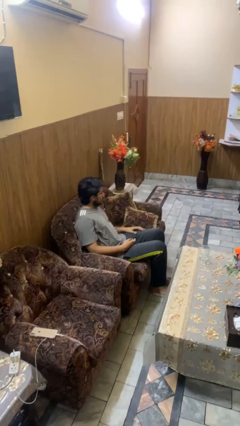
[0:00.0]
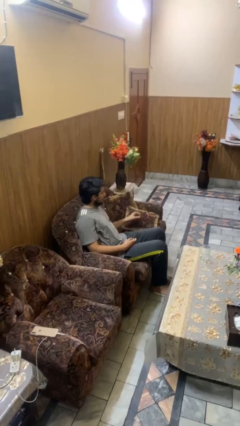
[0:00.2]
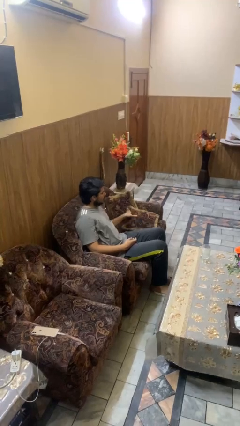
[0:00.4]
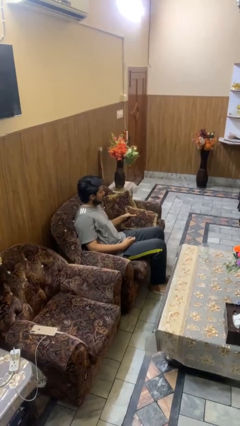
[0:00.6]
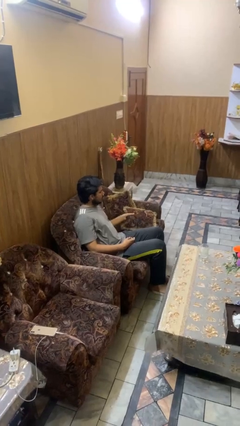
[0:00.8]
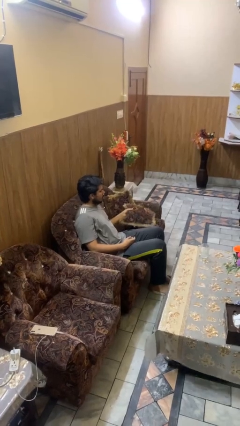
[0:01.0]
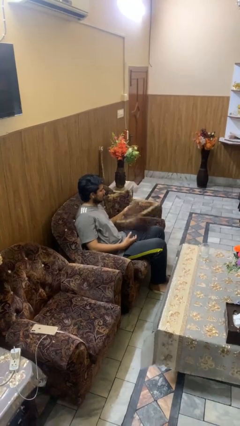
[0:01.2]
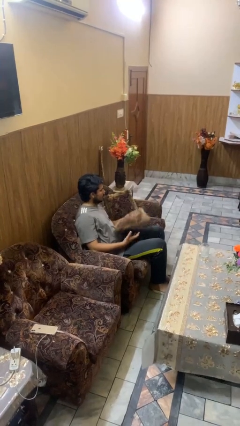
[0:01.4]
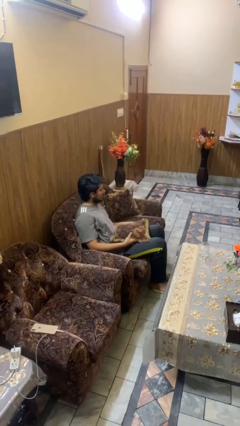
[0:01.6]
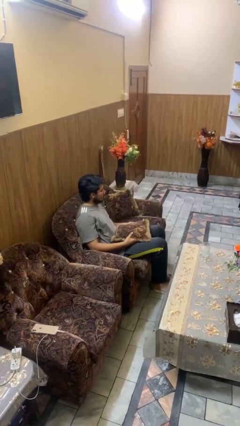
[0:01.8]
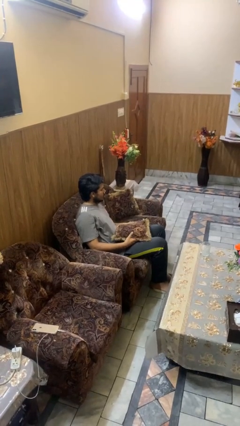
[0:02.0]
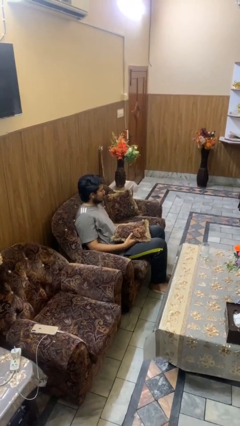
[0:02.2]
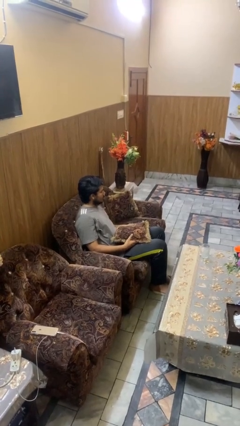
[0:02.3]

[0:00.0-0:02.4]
person picks up object from couch

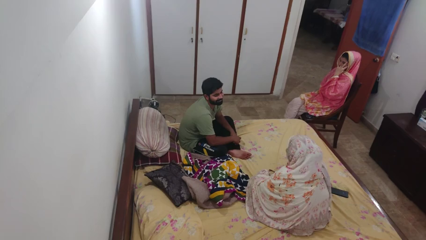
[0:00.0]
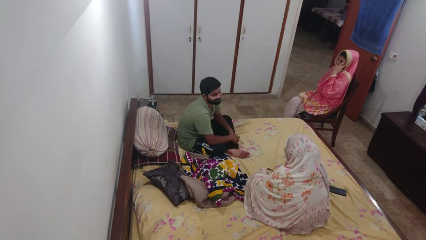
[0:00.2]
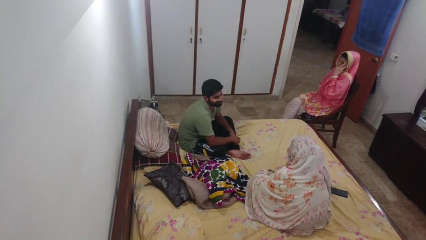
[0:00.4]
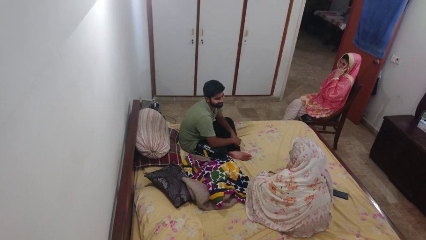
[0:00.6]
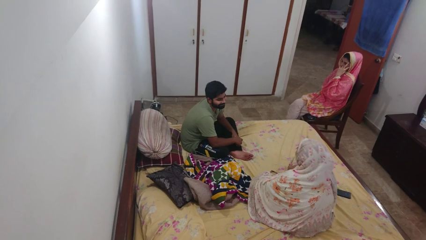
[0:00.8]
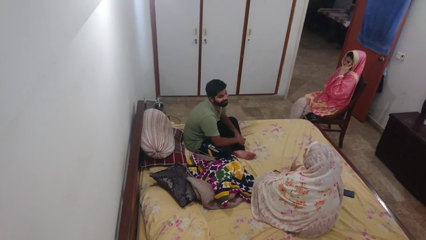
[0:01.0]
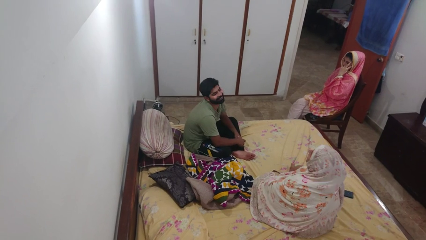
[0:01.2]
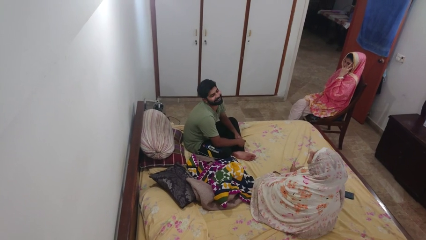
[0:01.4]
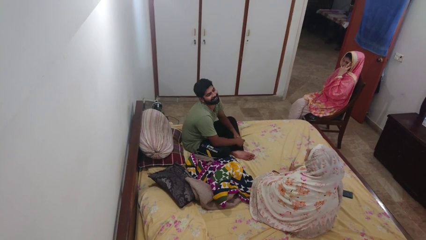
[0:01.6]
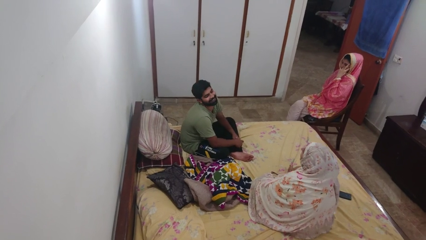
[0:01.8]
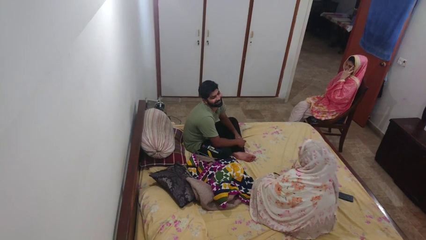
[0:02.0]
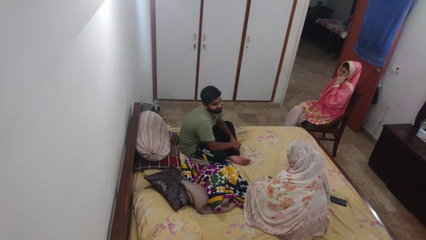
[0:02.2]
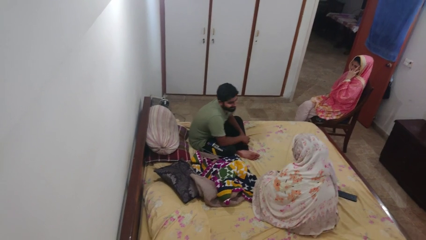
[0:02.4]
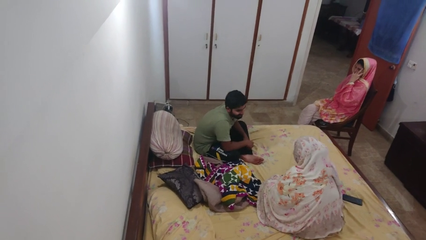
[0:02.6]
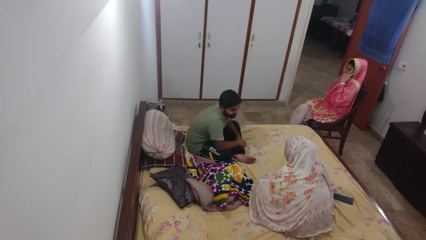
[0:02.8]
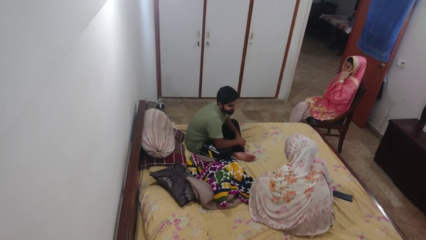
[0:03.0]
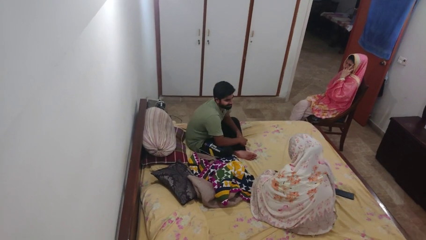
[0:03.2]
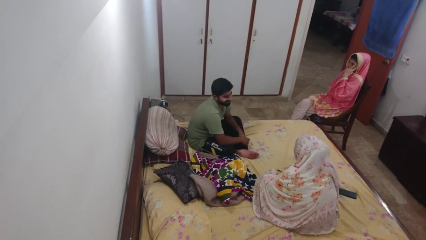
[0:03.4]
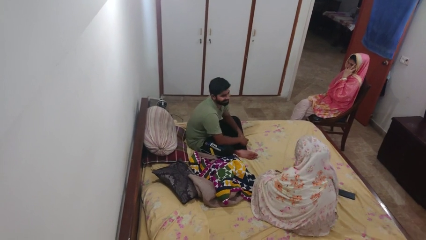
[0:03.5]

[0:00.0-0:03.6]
person laughs with person

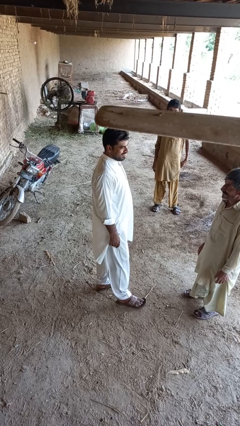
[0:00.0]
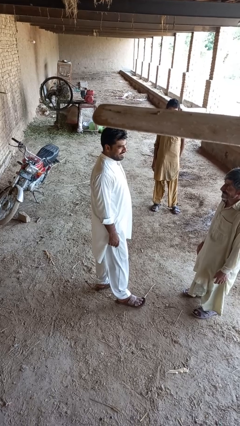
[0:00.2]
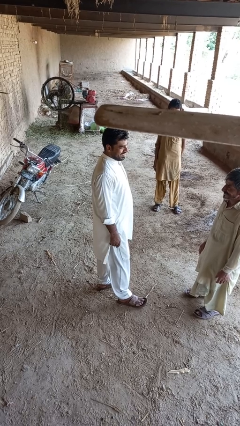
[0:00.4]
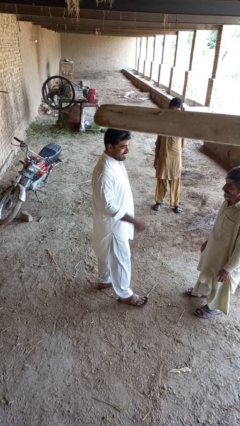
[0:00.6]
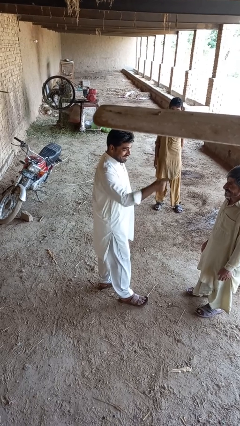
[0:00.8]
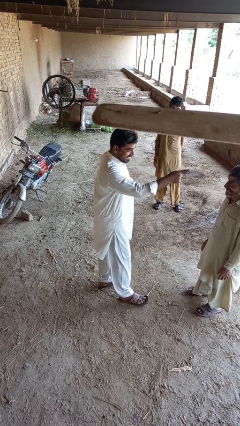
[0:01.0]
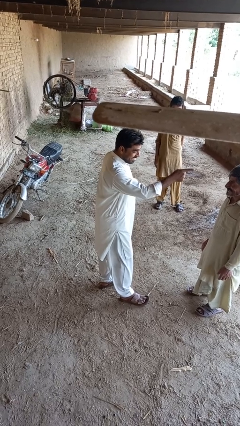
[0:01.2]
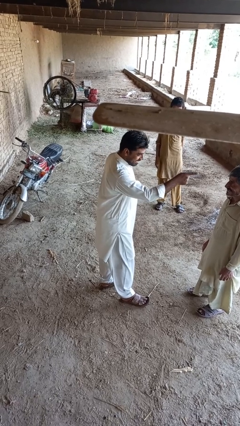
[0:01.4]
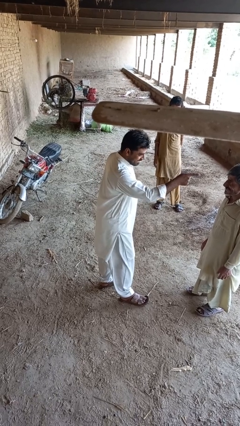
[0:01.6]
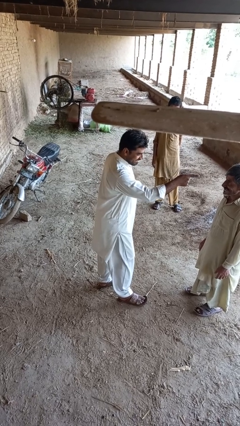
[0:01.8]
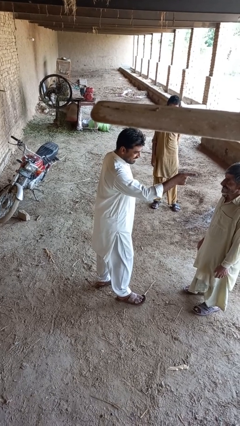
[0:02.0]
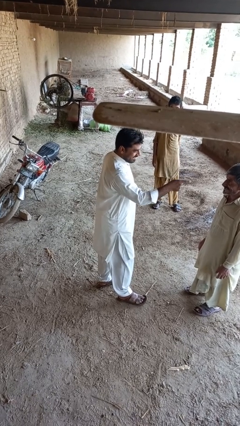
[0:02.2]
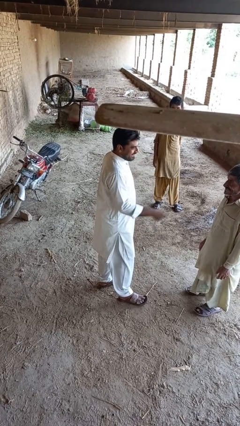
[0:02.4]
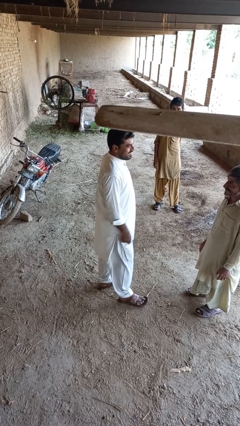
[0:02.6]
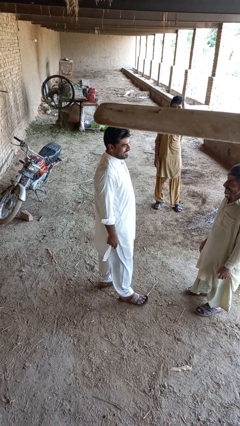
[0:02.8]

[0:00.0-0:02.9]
person points at person

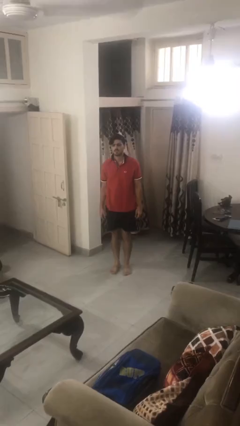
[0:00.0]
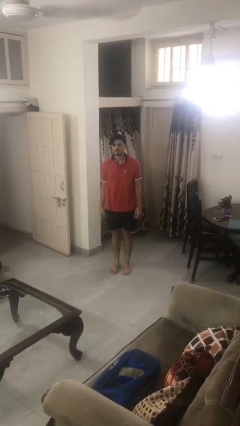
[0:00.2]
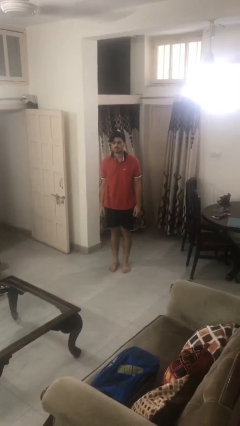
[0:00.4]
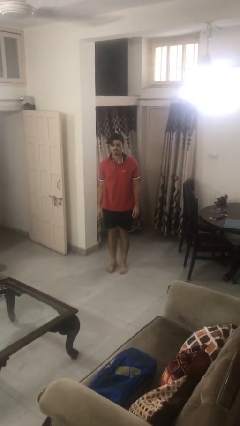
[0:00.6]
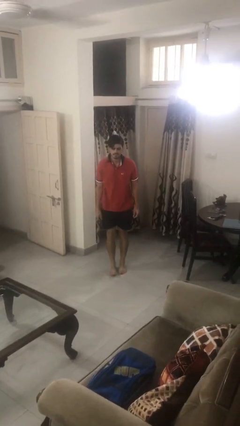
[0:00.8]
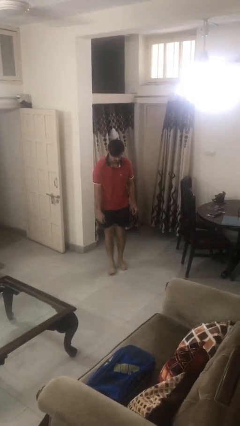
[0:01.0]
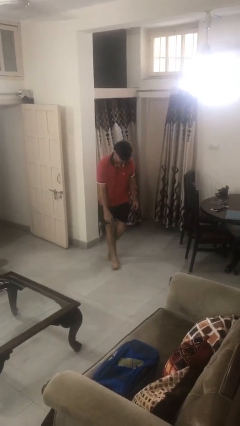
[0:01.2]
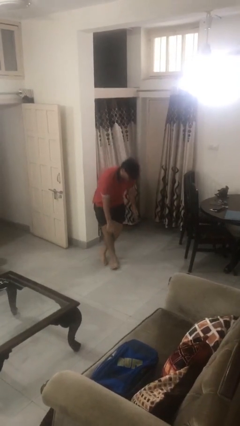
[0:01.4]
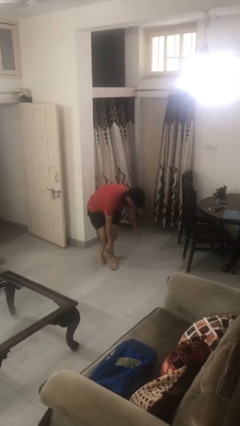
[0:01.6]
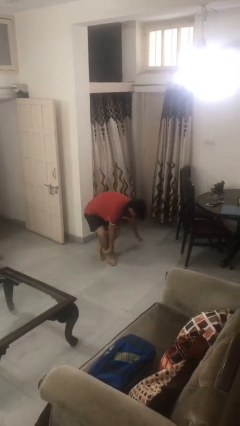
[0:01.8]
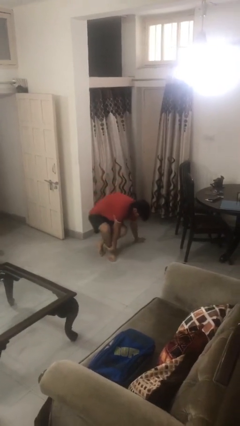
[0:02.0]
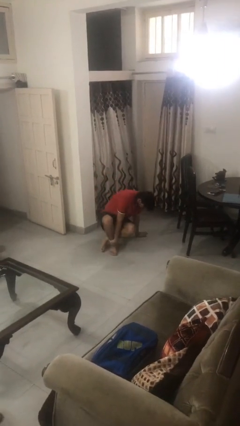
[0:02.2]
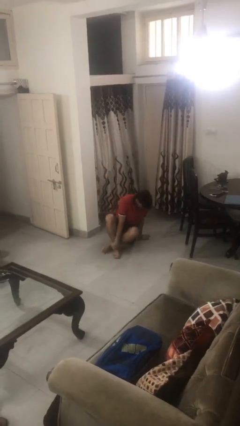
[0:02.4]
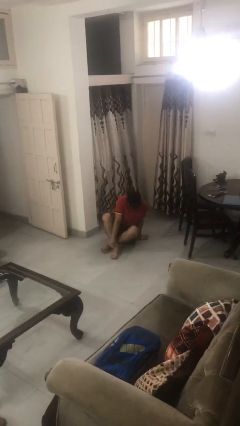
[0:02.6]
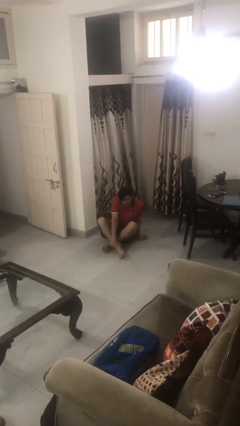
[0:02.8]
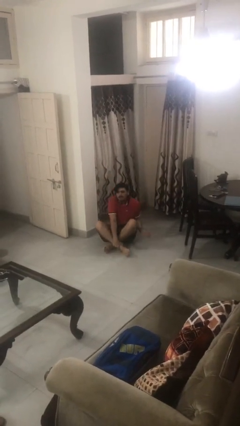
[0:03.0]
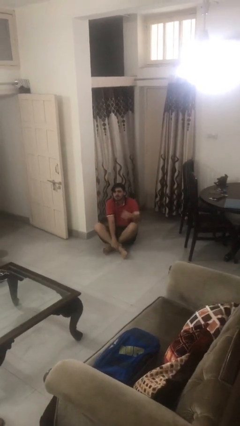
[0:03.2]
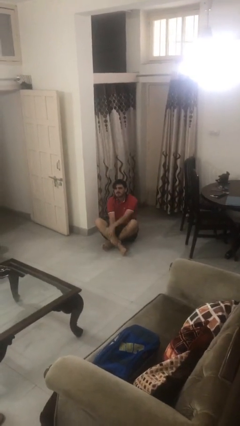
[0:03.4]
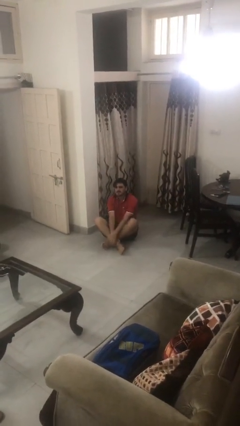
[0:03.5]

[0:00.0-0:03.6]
person sits crisscross

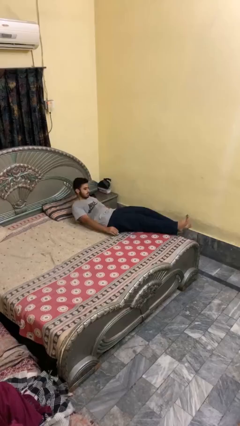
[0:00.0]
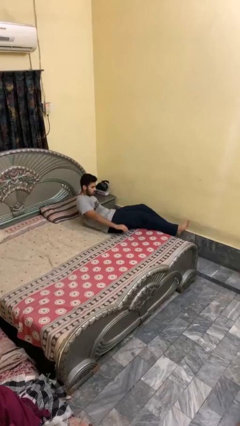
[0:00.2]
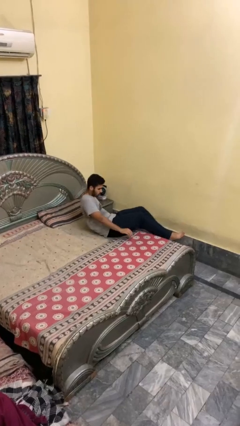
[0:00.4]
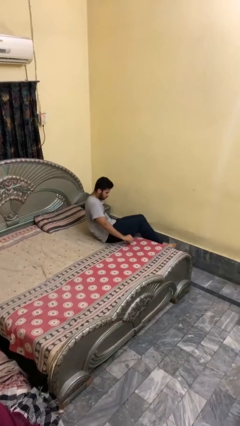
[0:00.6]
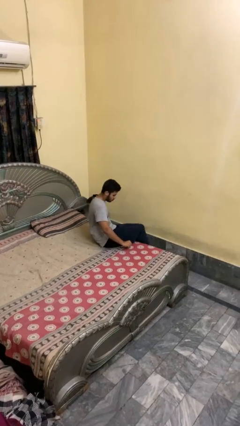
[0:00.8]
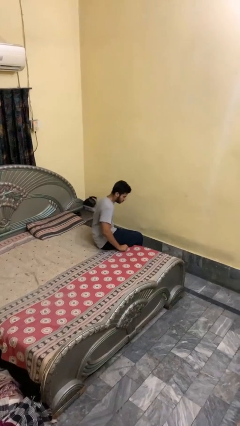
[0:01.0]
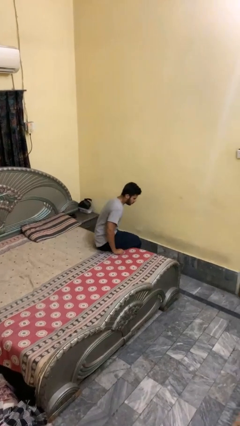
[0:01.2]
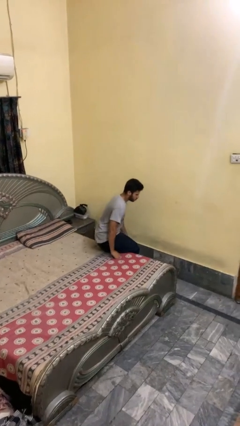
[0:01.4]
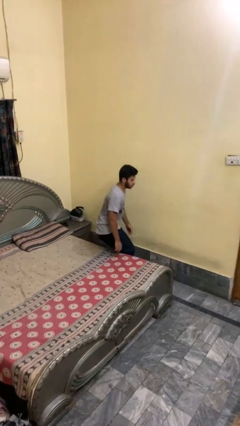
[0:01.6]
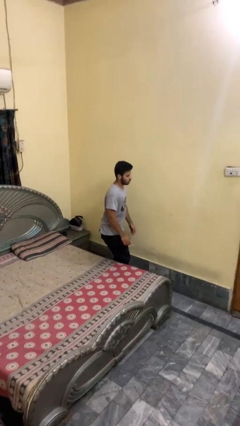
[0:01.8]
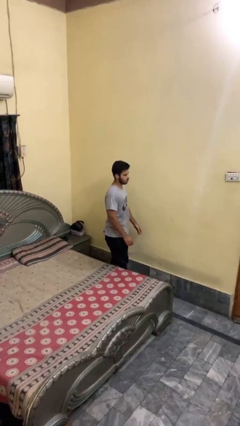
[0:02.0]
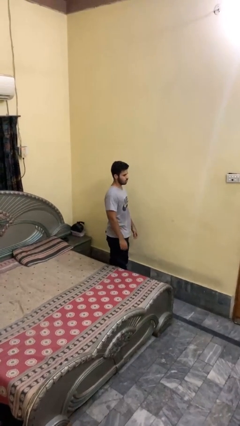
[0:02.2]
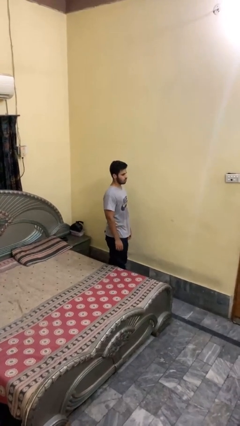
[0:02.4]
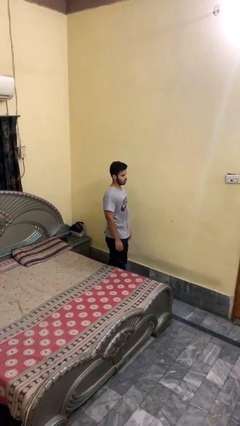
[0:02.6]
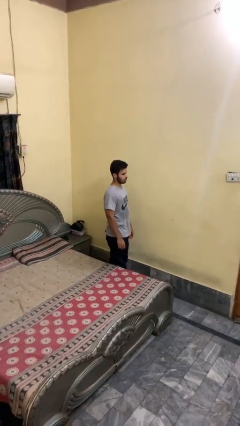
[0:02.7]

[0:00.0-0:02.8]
person stands up

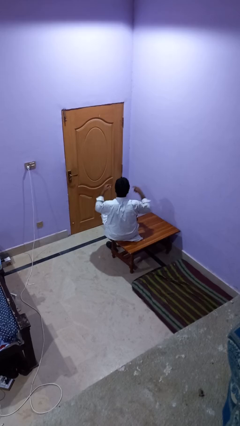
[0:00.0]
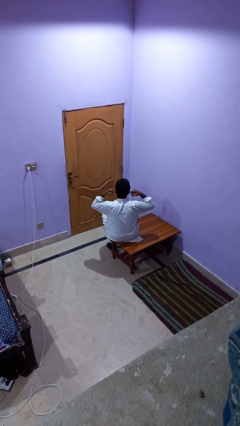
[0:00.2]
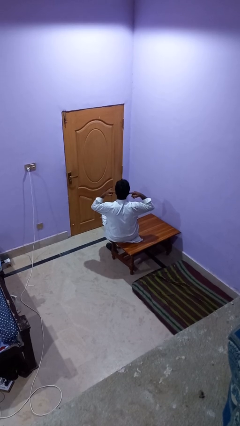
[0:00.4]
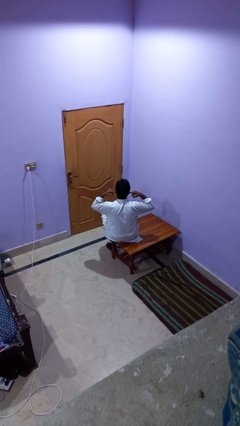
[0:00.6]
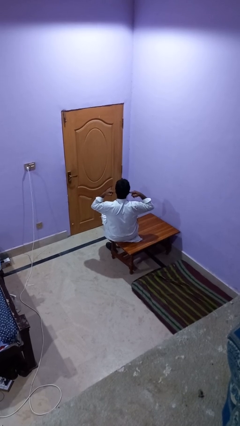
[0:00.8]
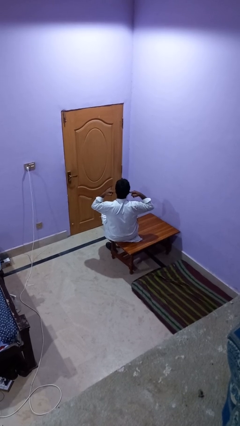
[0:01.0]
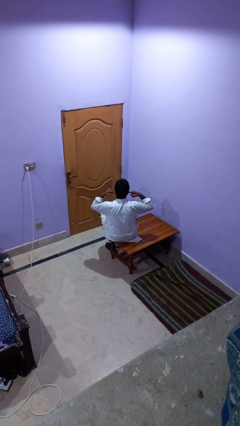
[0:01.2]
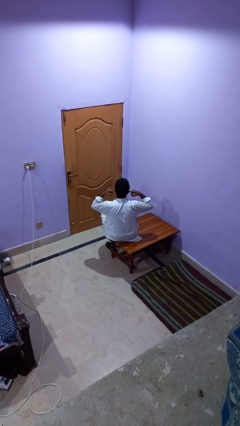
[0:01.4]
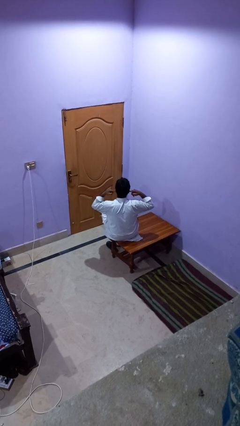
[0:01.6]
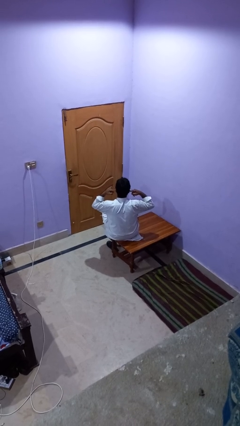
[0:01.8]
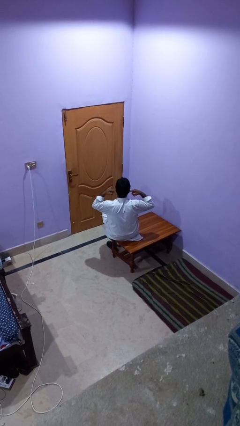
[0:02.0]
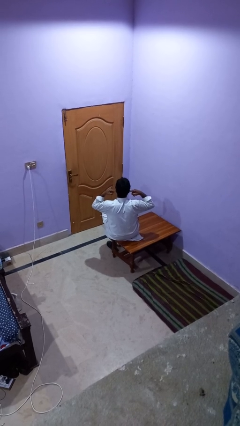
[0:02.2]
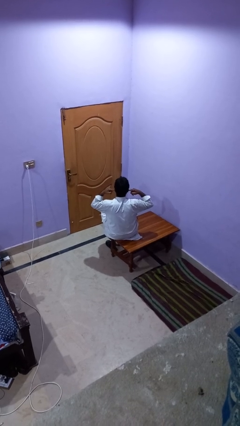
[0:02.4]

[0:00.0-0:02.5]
person puts fingers in ear
